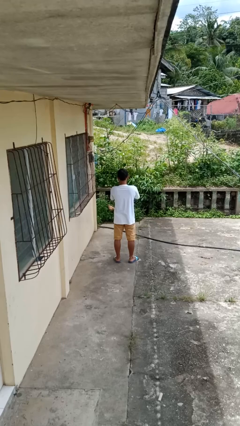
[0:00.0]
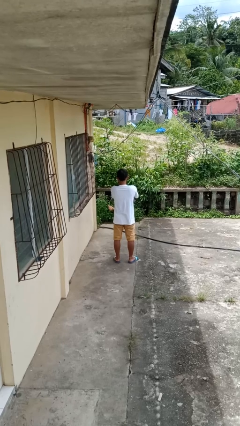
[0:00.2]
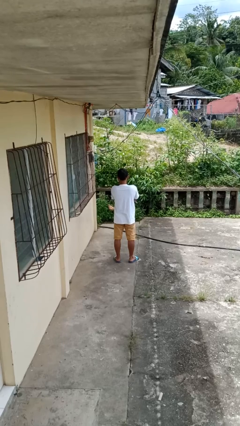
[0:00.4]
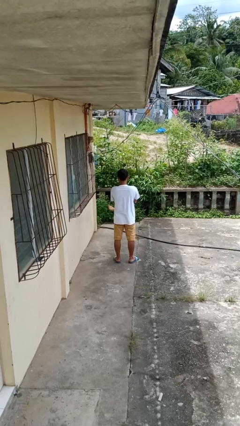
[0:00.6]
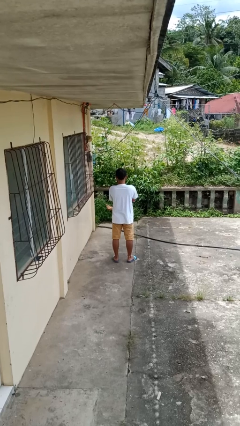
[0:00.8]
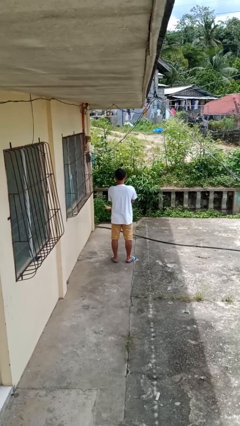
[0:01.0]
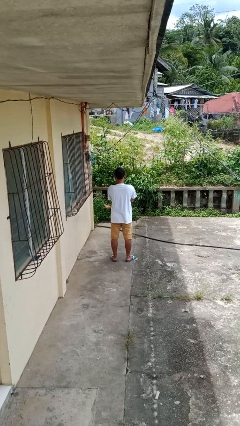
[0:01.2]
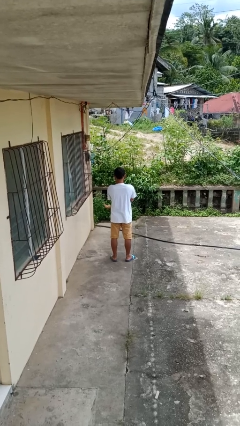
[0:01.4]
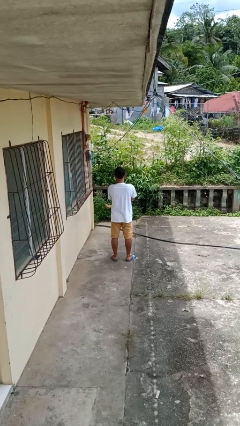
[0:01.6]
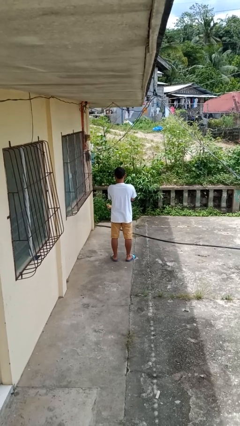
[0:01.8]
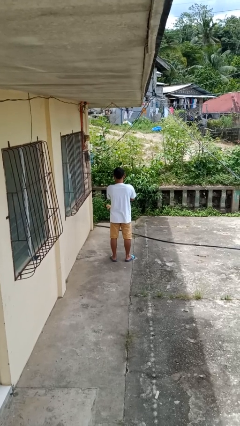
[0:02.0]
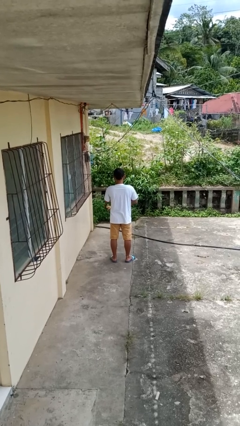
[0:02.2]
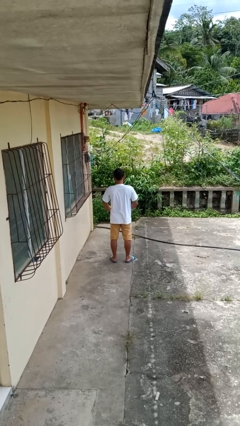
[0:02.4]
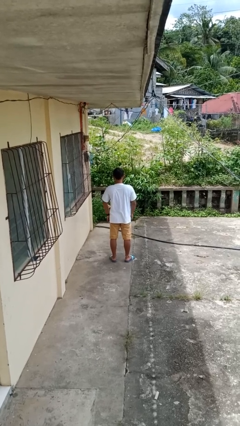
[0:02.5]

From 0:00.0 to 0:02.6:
person crosses arms

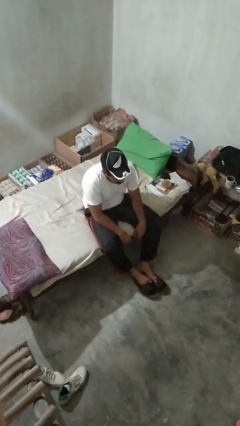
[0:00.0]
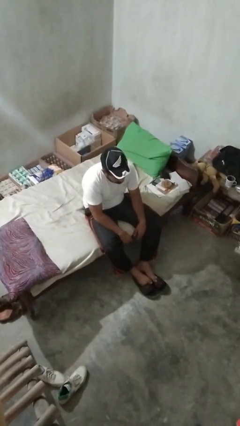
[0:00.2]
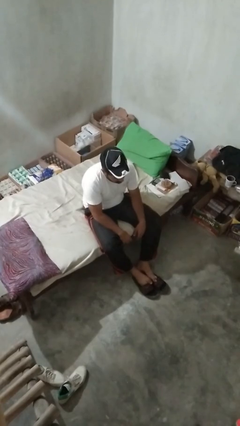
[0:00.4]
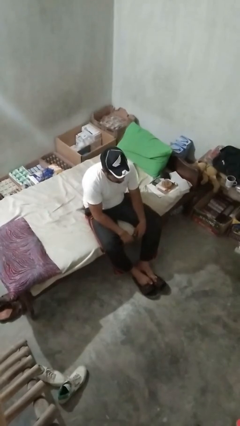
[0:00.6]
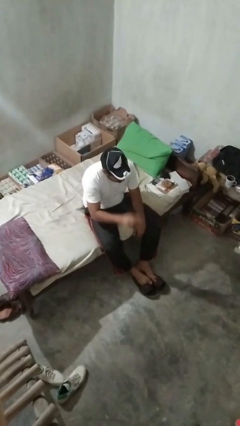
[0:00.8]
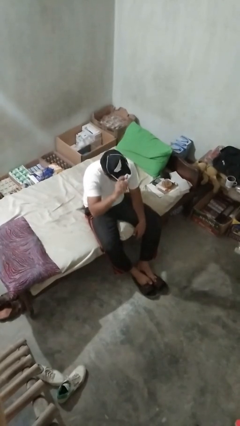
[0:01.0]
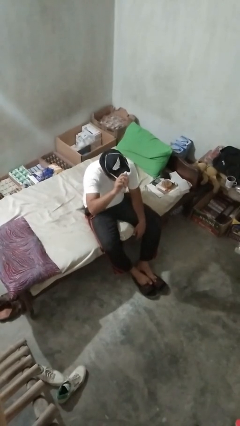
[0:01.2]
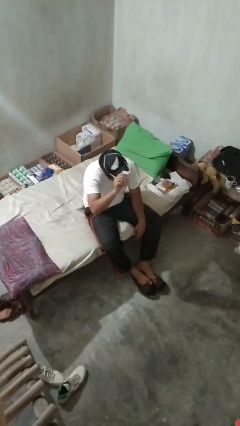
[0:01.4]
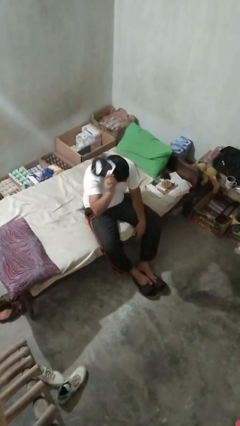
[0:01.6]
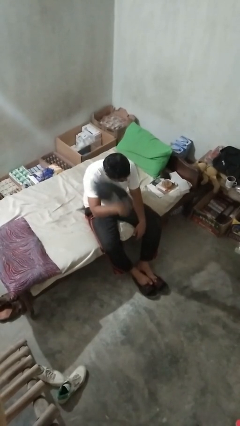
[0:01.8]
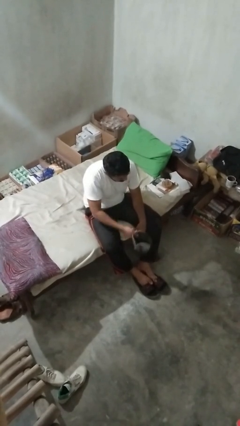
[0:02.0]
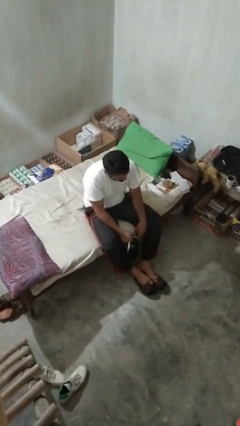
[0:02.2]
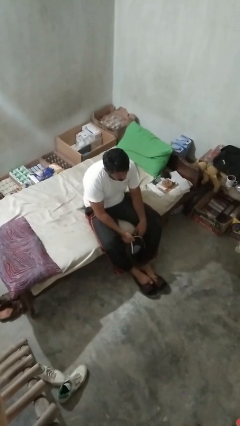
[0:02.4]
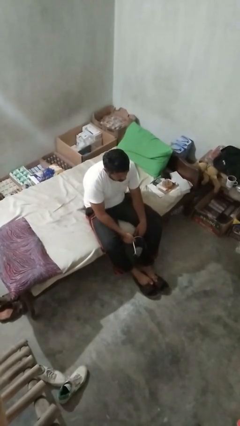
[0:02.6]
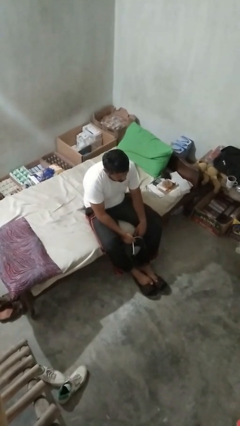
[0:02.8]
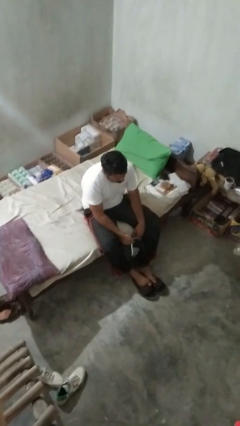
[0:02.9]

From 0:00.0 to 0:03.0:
person takes off hat

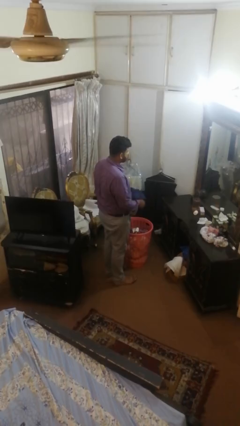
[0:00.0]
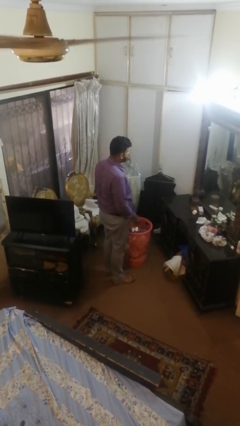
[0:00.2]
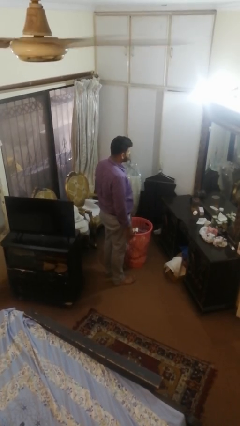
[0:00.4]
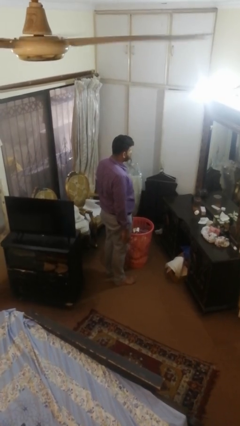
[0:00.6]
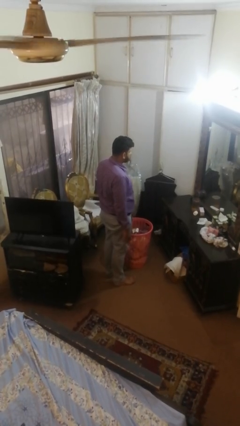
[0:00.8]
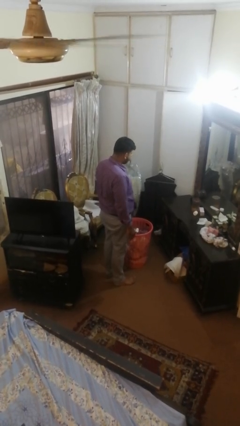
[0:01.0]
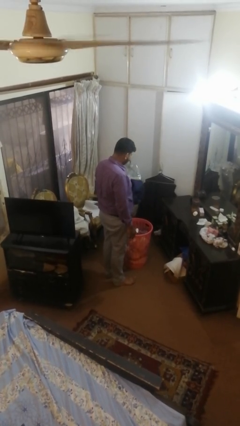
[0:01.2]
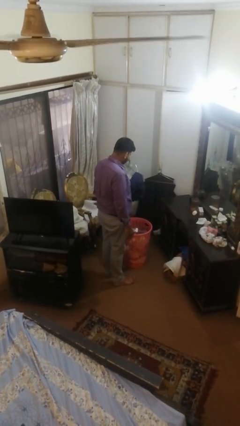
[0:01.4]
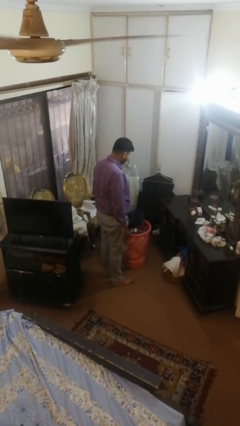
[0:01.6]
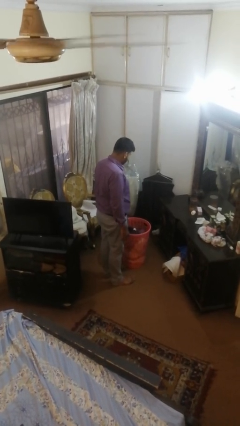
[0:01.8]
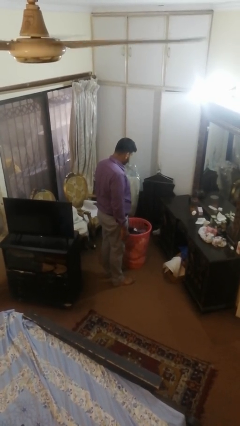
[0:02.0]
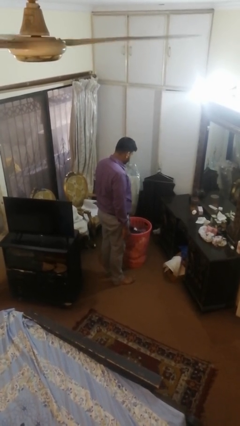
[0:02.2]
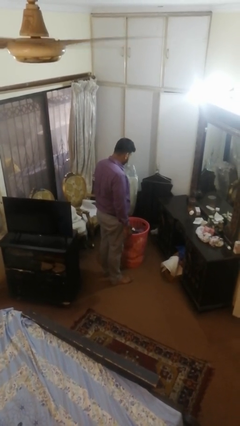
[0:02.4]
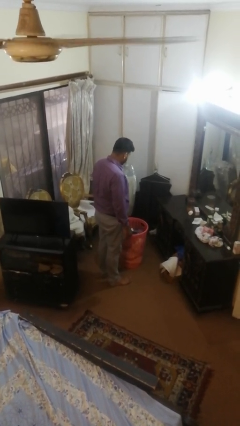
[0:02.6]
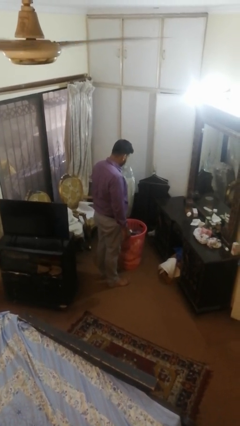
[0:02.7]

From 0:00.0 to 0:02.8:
person puts object into basket

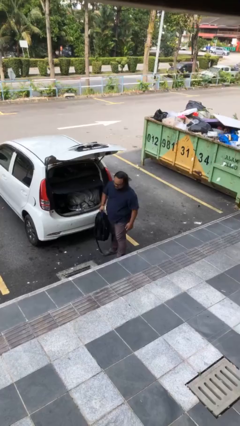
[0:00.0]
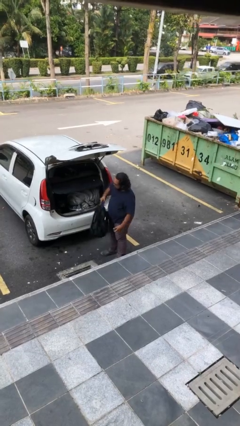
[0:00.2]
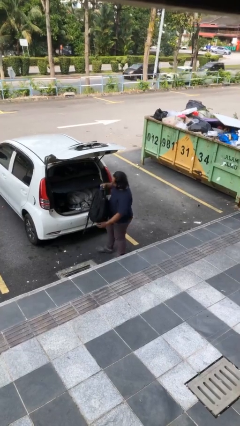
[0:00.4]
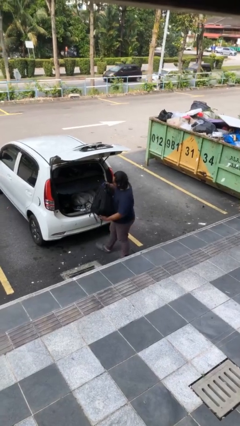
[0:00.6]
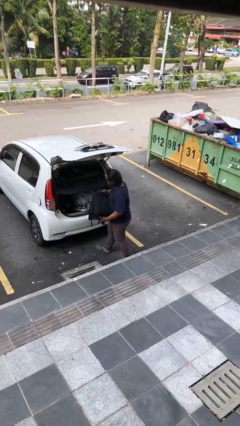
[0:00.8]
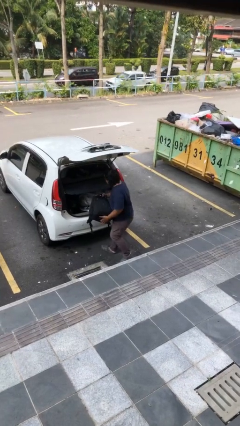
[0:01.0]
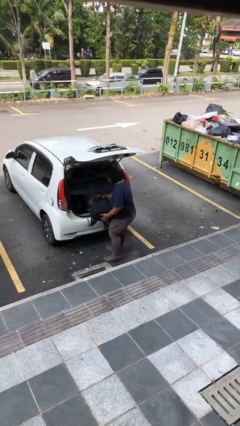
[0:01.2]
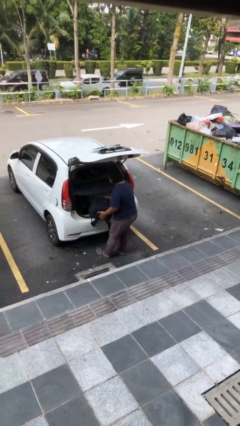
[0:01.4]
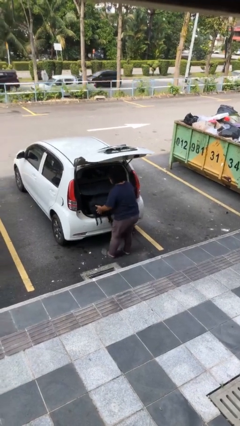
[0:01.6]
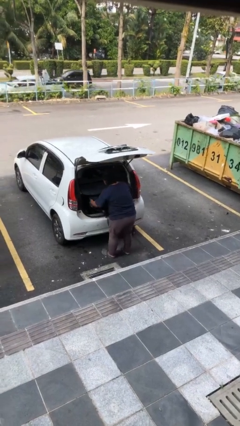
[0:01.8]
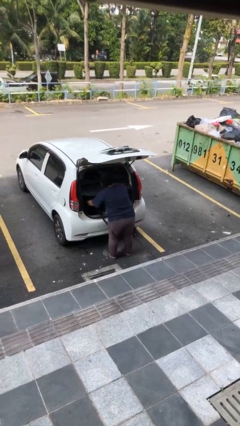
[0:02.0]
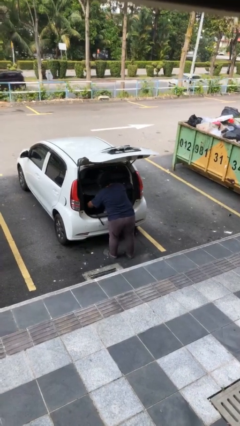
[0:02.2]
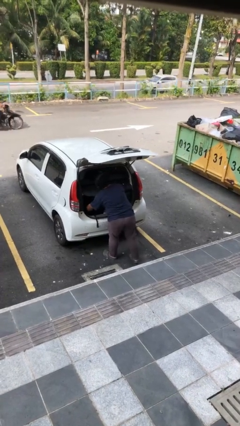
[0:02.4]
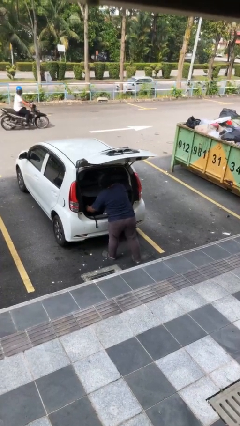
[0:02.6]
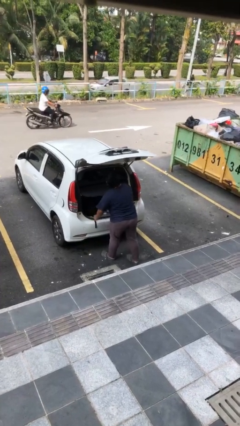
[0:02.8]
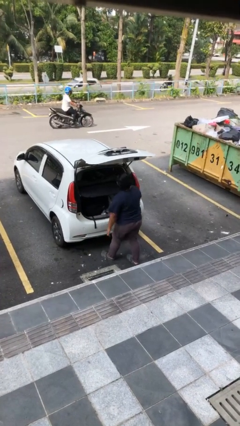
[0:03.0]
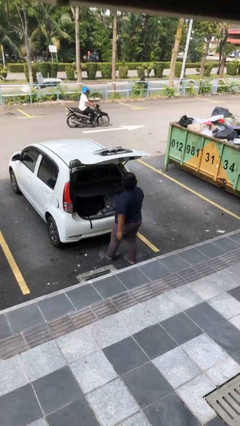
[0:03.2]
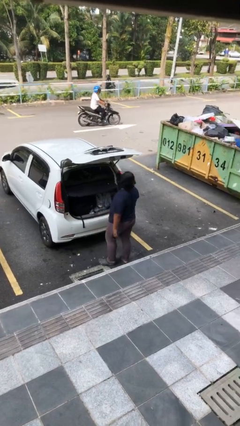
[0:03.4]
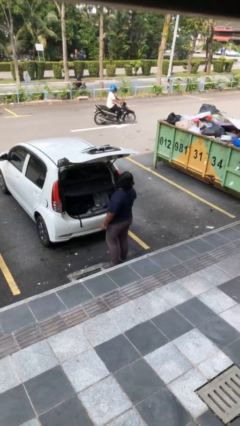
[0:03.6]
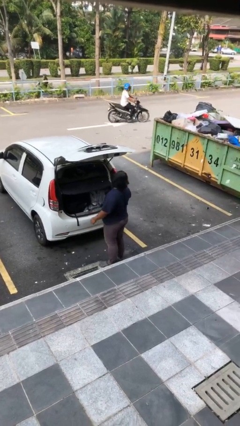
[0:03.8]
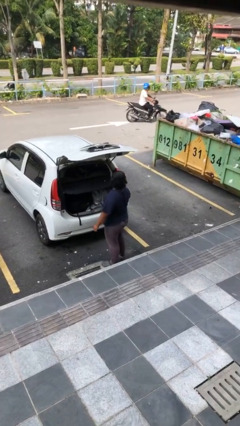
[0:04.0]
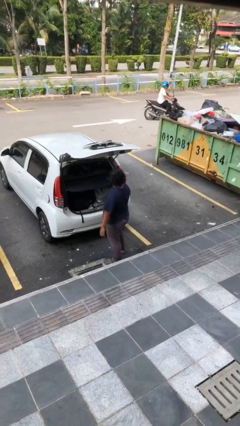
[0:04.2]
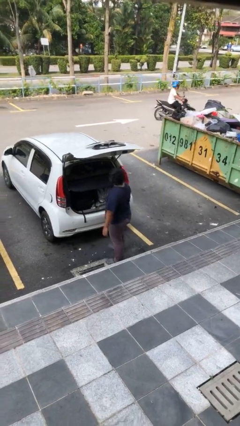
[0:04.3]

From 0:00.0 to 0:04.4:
person loads car

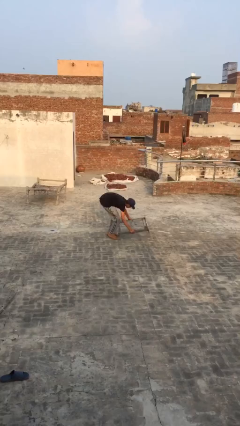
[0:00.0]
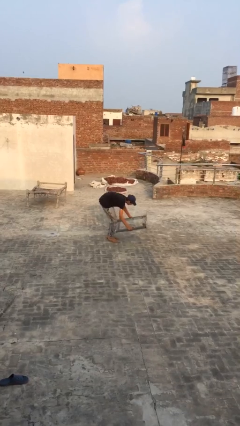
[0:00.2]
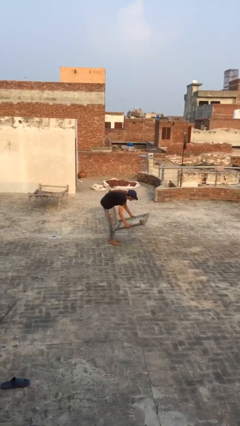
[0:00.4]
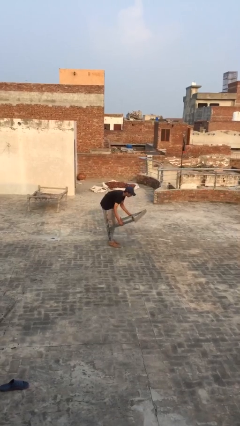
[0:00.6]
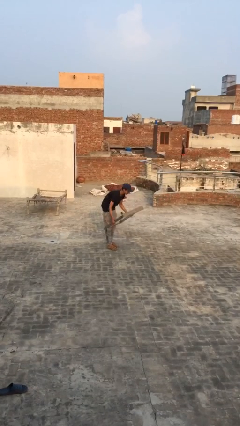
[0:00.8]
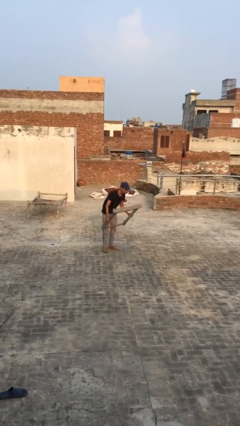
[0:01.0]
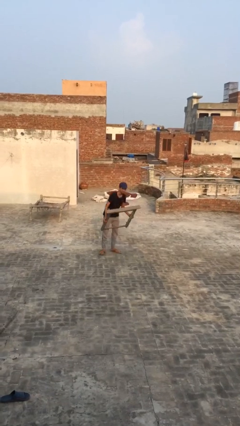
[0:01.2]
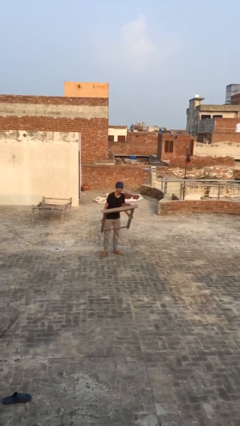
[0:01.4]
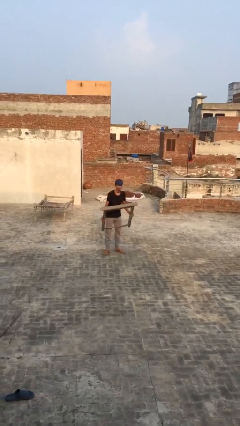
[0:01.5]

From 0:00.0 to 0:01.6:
person carries heavy object

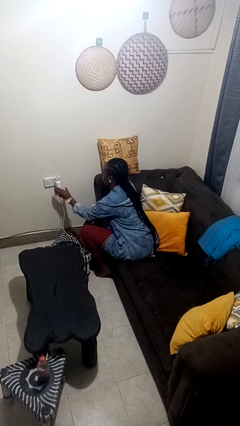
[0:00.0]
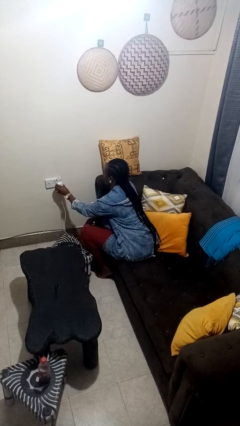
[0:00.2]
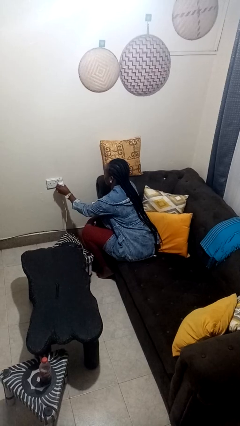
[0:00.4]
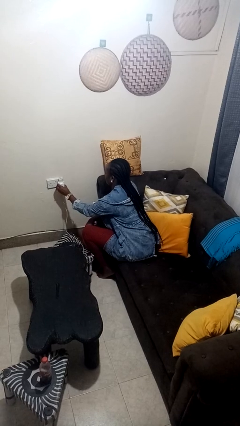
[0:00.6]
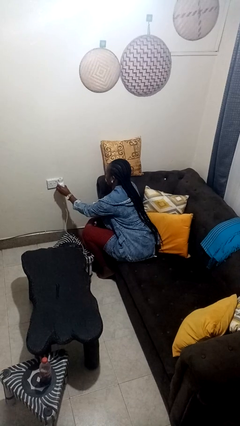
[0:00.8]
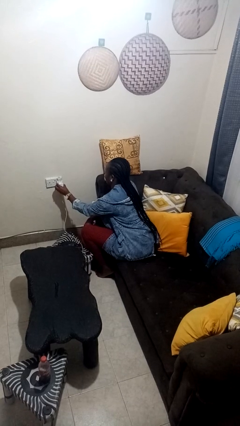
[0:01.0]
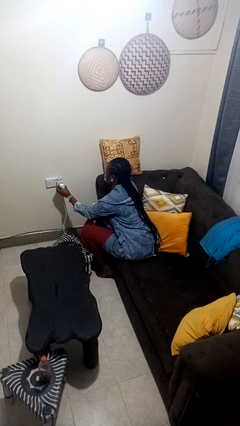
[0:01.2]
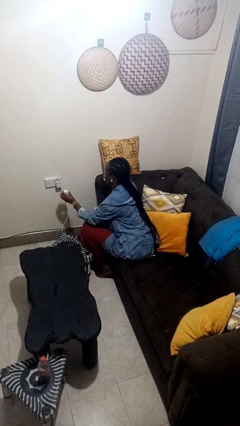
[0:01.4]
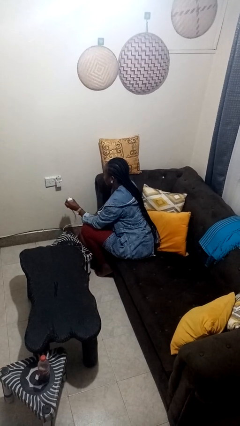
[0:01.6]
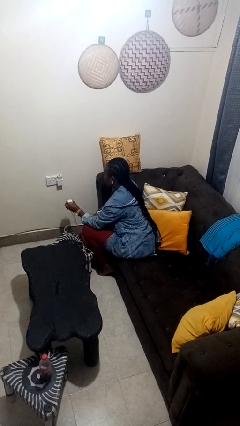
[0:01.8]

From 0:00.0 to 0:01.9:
person unplugs from electrical socket

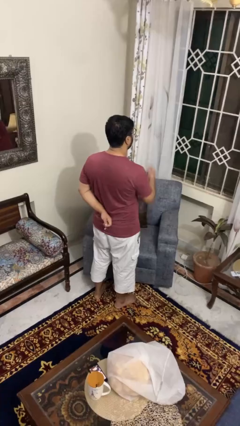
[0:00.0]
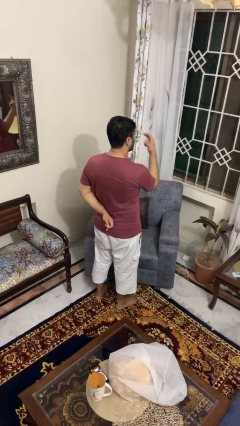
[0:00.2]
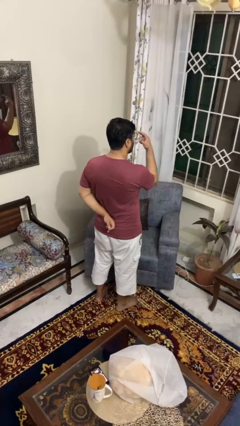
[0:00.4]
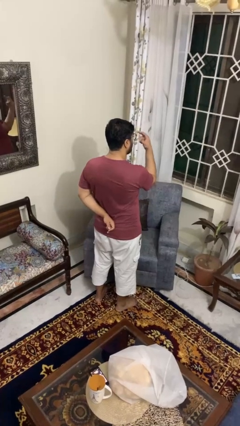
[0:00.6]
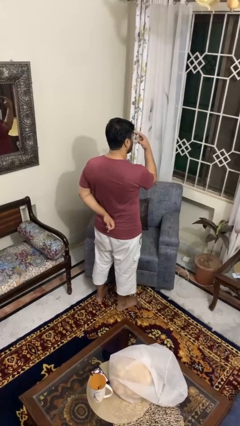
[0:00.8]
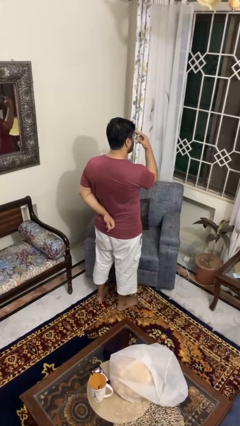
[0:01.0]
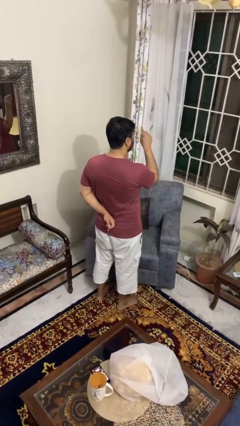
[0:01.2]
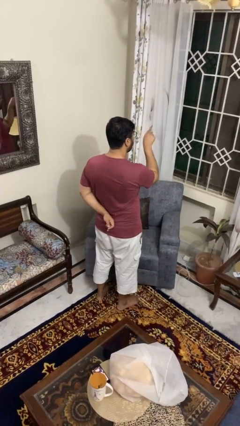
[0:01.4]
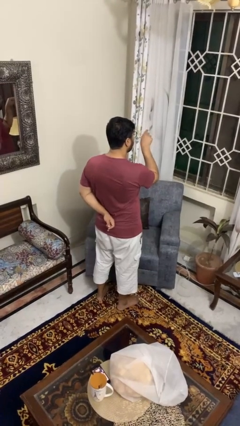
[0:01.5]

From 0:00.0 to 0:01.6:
person gestures watch closely
